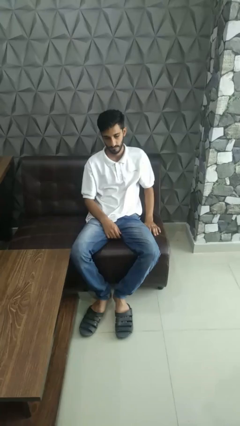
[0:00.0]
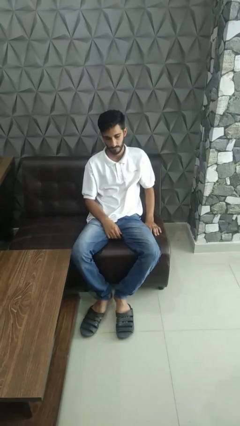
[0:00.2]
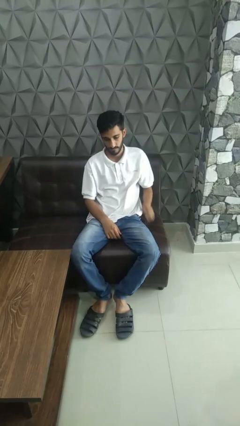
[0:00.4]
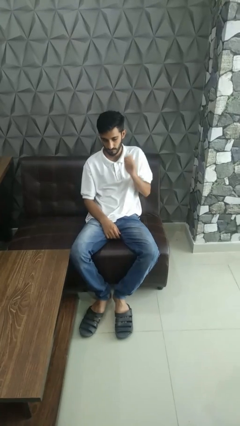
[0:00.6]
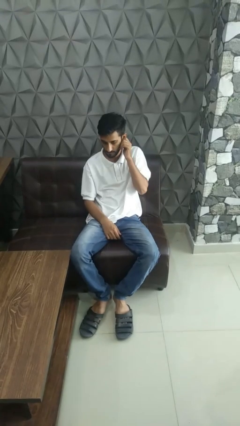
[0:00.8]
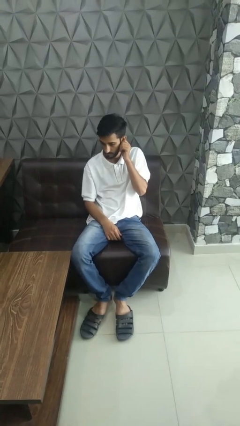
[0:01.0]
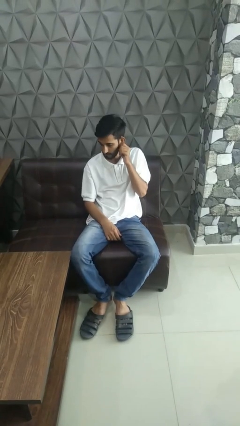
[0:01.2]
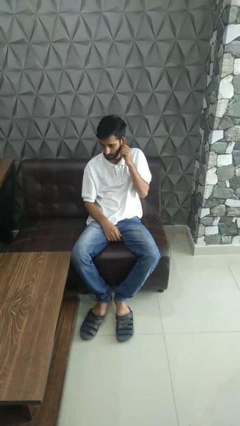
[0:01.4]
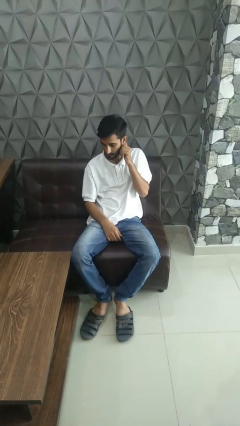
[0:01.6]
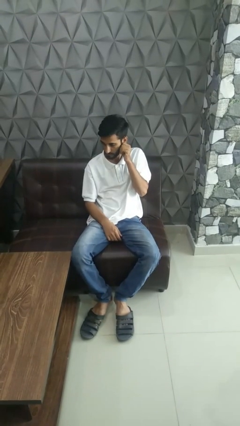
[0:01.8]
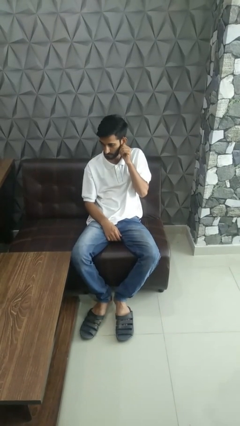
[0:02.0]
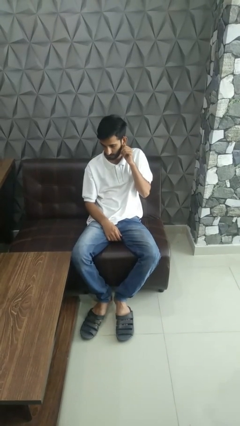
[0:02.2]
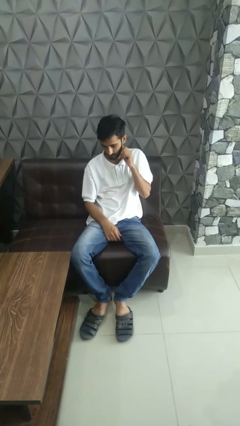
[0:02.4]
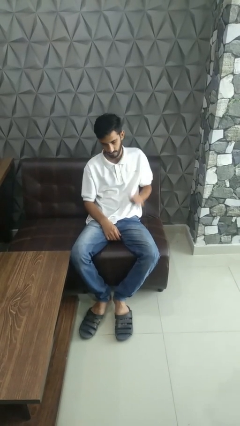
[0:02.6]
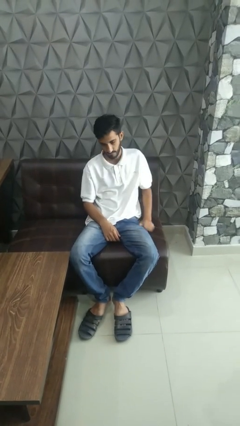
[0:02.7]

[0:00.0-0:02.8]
person touches earlobe

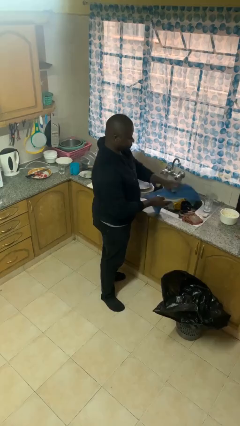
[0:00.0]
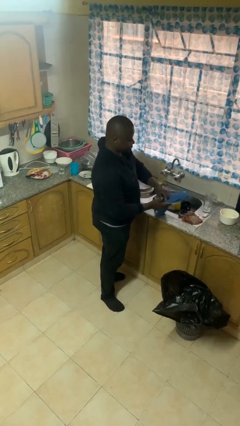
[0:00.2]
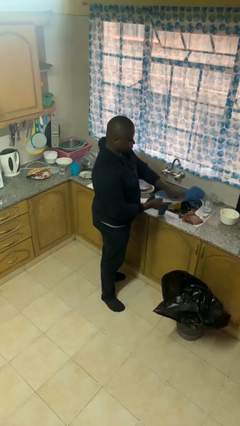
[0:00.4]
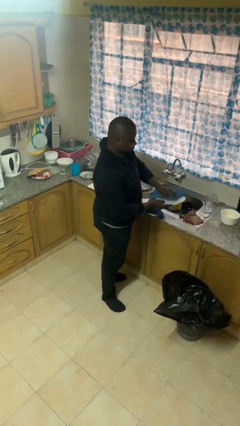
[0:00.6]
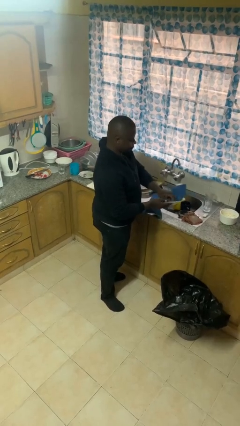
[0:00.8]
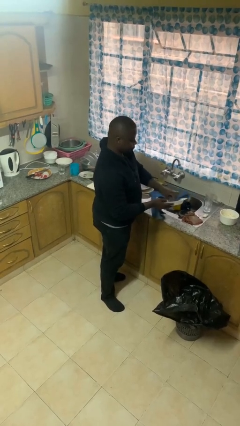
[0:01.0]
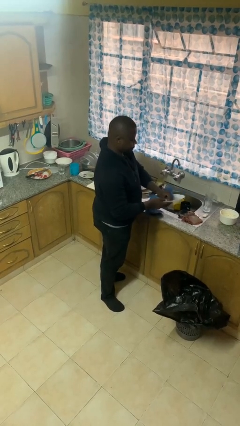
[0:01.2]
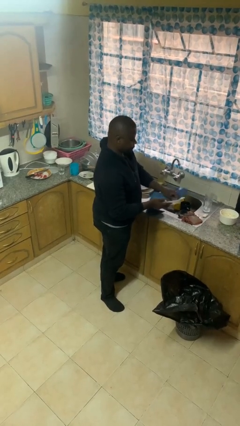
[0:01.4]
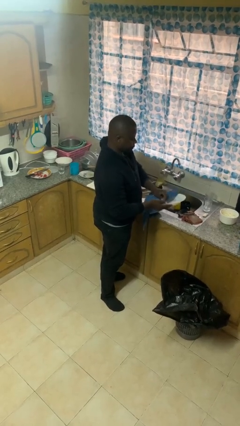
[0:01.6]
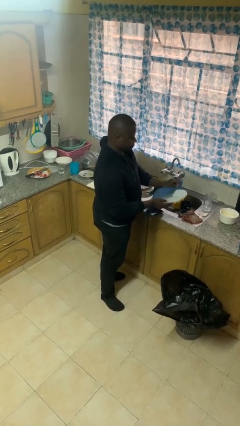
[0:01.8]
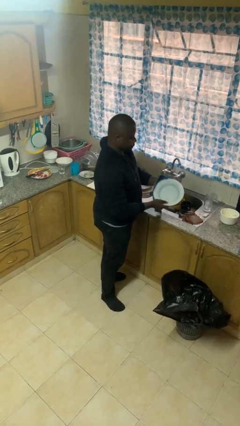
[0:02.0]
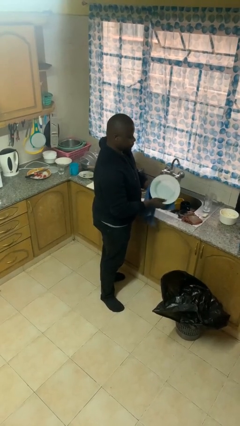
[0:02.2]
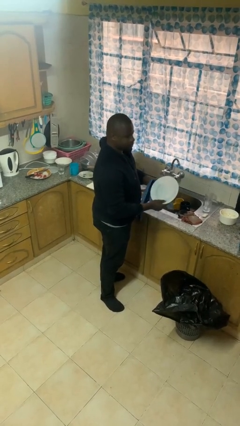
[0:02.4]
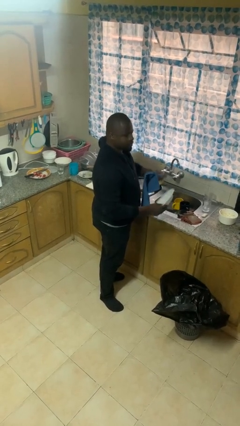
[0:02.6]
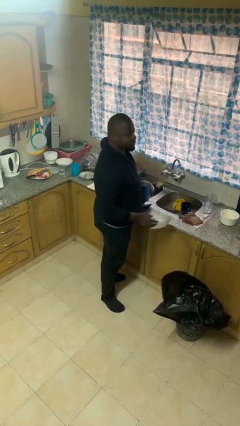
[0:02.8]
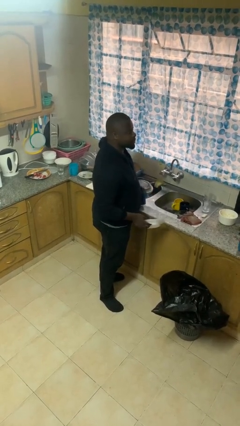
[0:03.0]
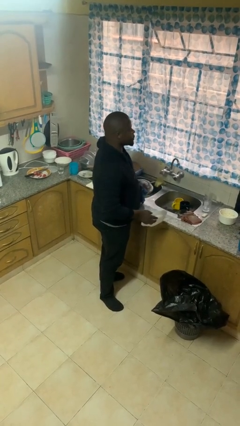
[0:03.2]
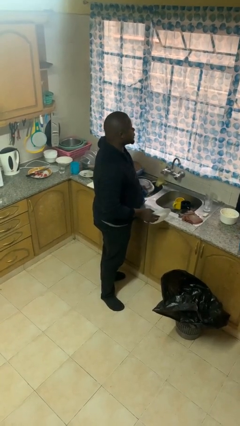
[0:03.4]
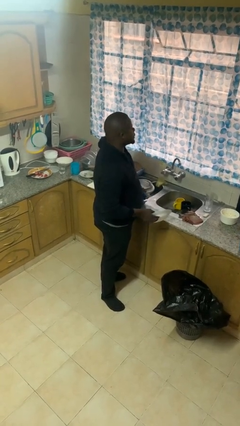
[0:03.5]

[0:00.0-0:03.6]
person dries dish

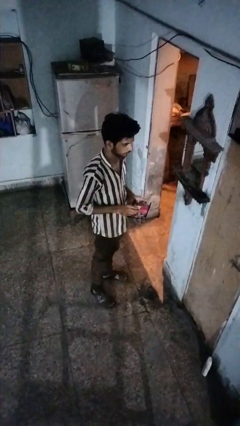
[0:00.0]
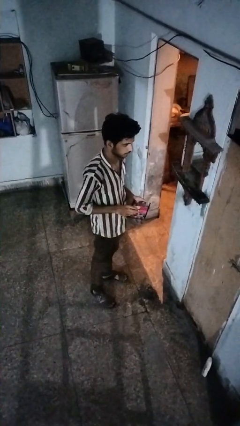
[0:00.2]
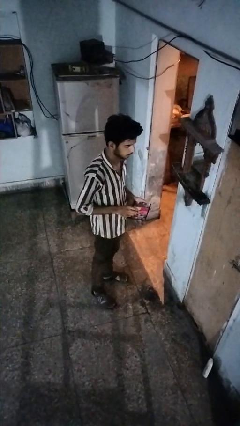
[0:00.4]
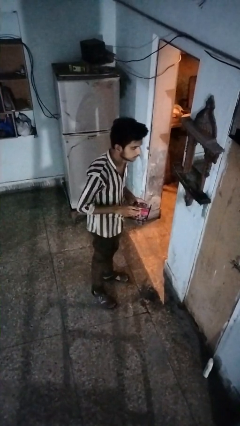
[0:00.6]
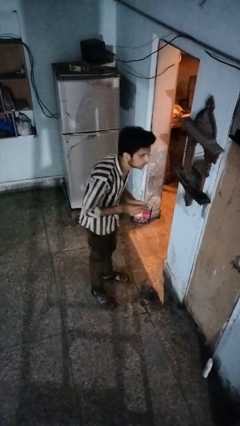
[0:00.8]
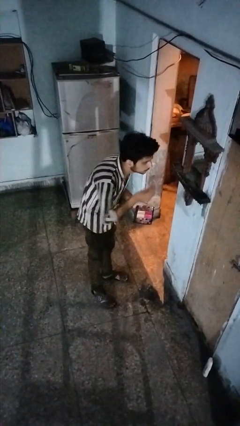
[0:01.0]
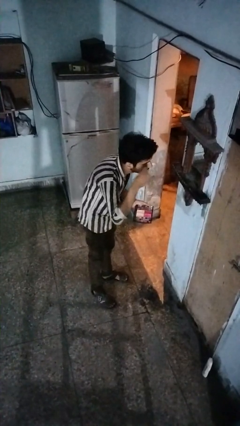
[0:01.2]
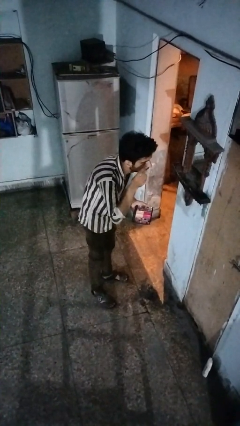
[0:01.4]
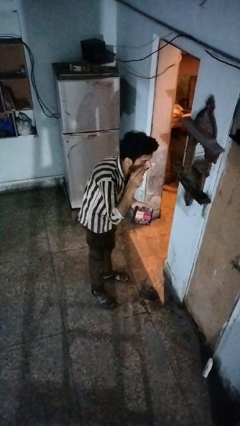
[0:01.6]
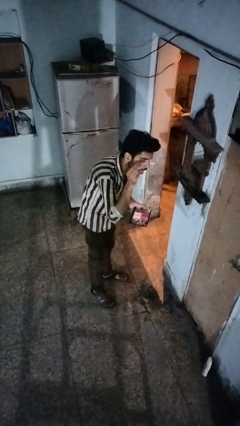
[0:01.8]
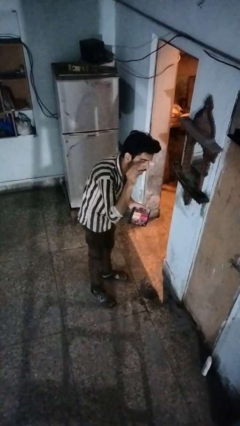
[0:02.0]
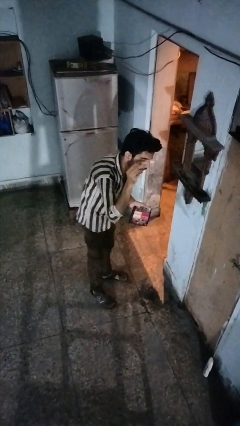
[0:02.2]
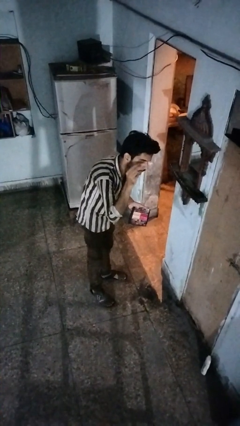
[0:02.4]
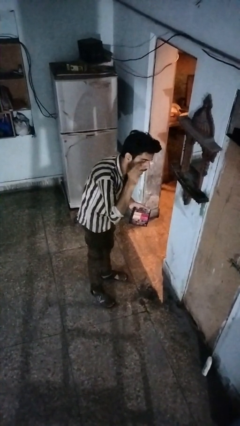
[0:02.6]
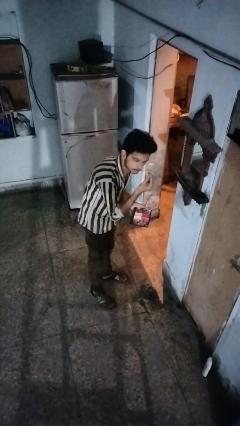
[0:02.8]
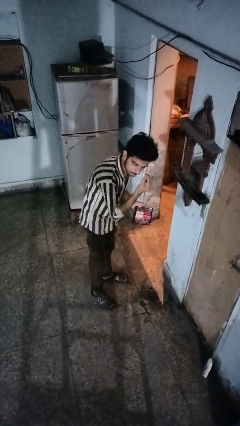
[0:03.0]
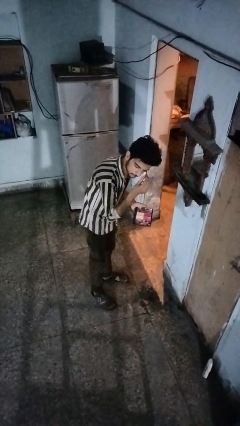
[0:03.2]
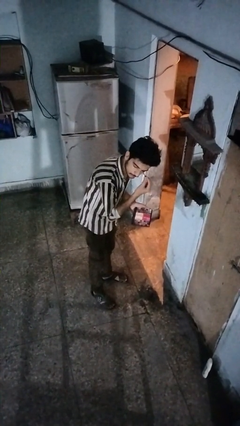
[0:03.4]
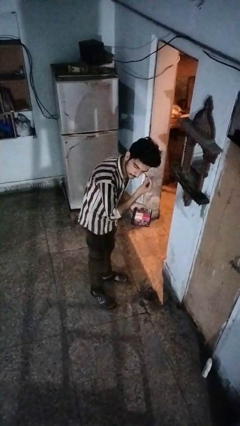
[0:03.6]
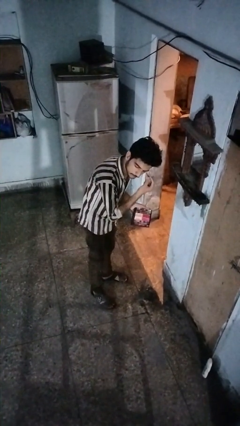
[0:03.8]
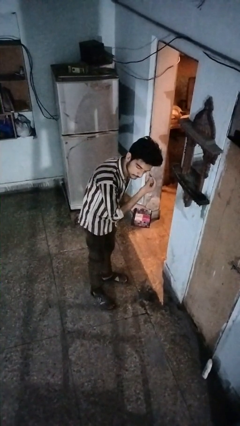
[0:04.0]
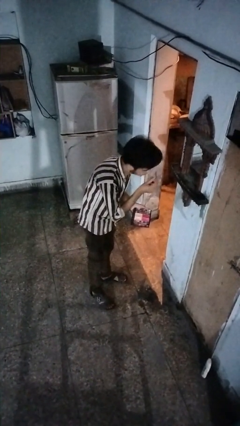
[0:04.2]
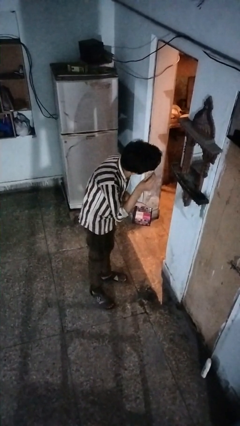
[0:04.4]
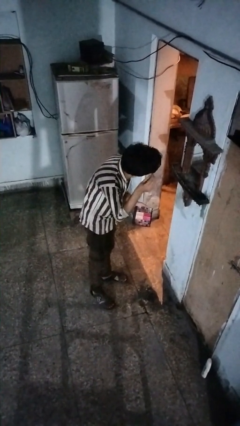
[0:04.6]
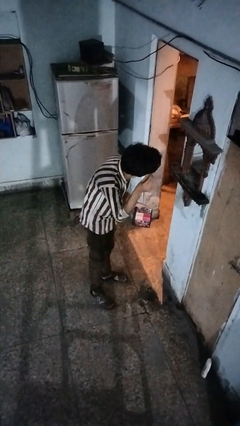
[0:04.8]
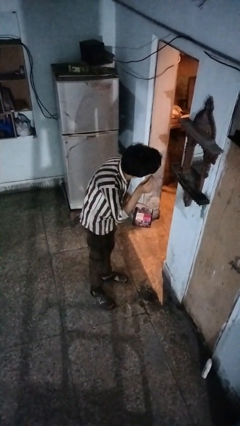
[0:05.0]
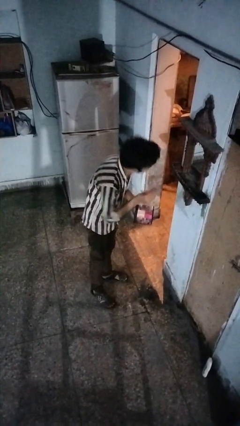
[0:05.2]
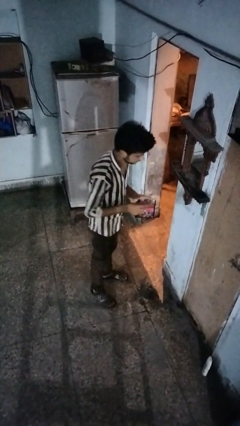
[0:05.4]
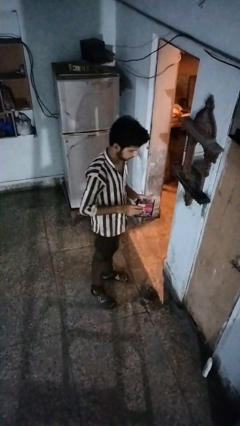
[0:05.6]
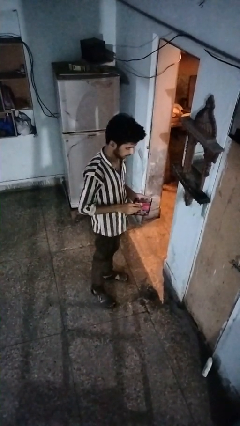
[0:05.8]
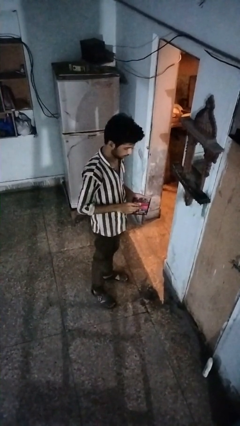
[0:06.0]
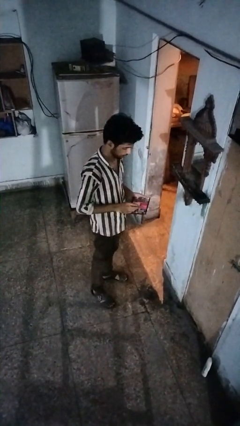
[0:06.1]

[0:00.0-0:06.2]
person applies eye makeup

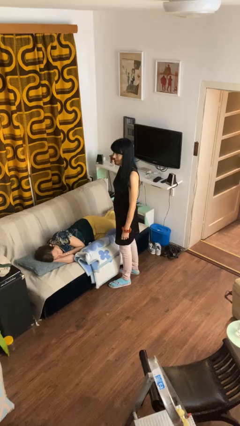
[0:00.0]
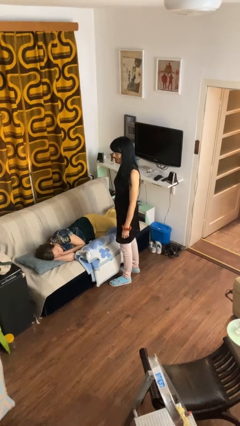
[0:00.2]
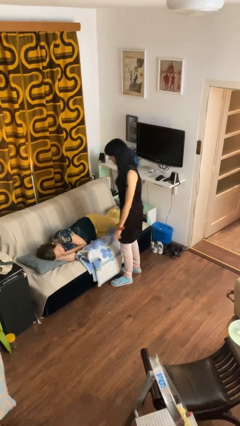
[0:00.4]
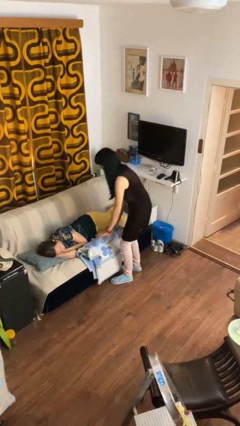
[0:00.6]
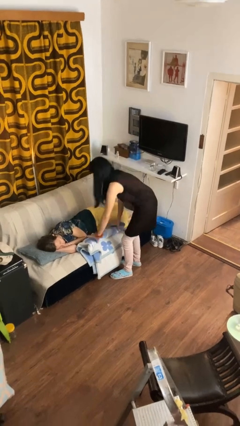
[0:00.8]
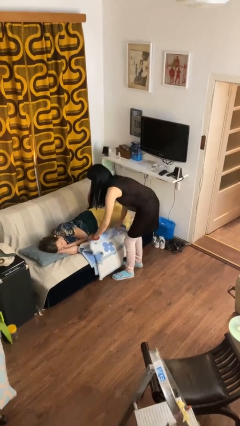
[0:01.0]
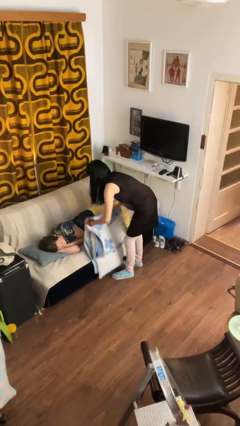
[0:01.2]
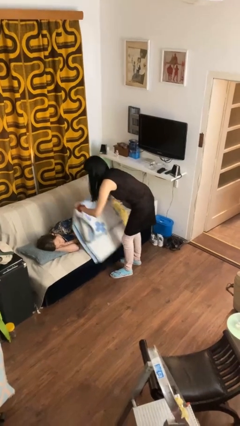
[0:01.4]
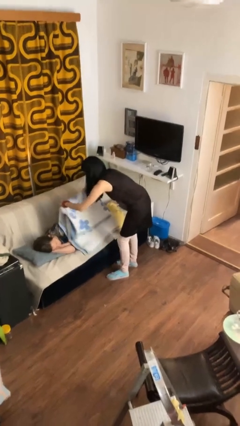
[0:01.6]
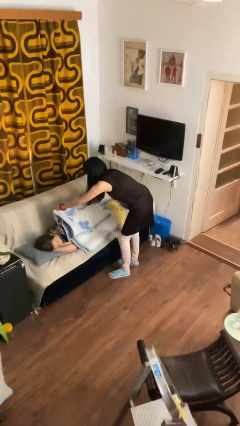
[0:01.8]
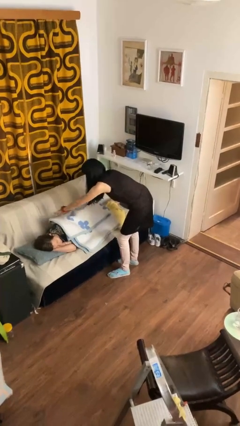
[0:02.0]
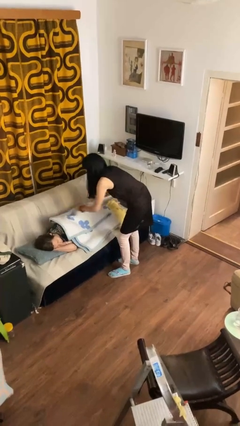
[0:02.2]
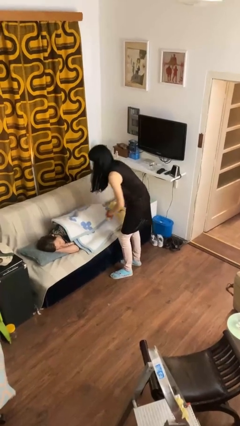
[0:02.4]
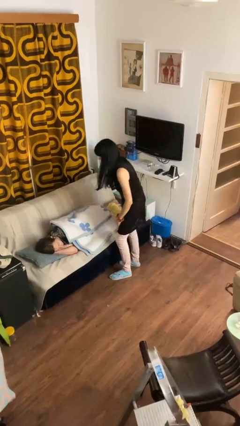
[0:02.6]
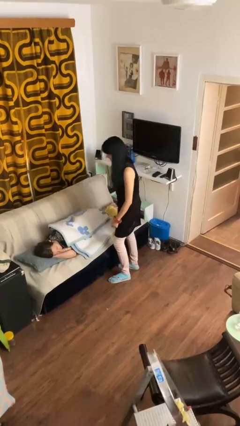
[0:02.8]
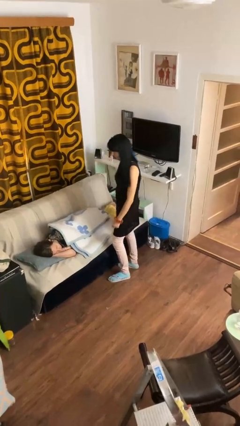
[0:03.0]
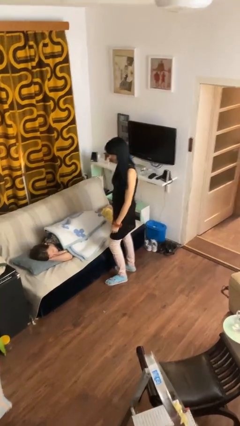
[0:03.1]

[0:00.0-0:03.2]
person covers friend with blanket

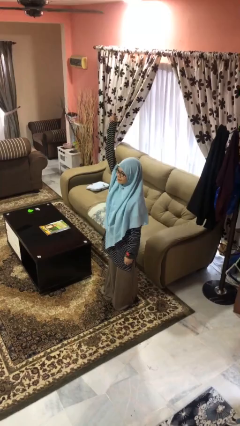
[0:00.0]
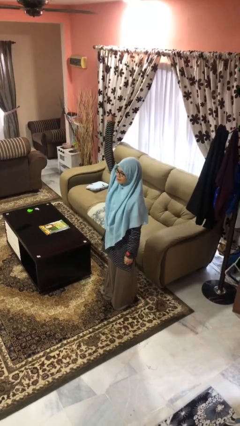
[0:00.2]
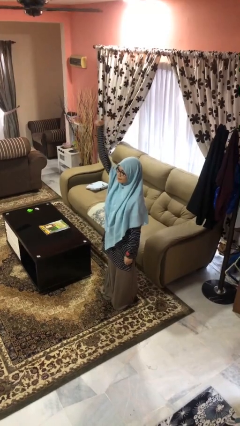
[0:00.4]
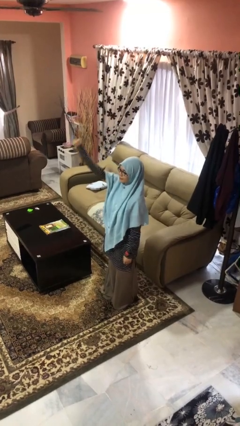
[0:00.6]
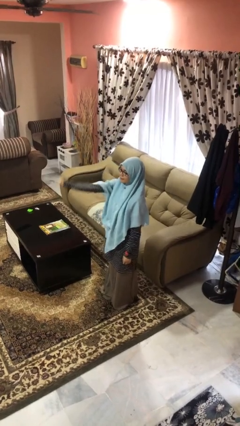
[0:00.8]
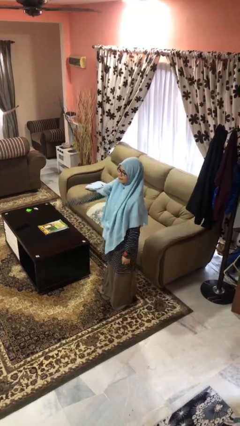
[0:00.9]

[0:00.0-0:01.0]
person gestures lower hand

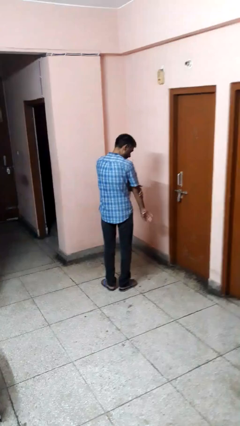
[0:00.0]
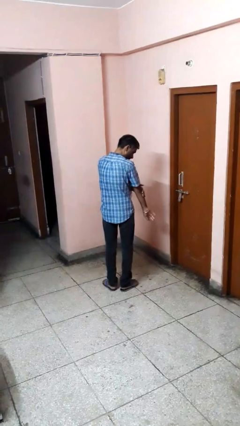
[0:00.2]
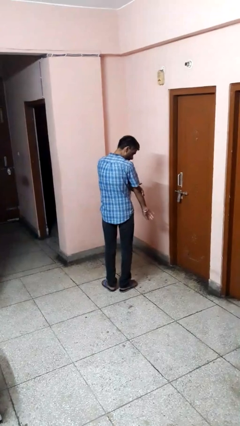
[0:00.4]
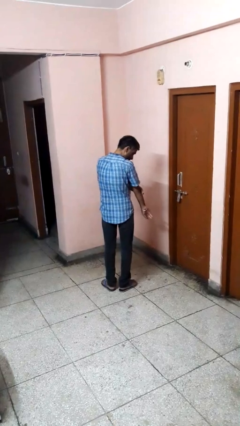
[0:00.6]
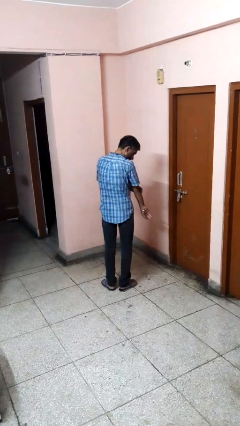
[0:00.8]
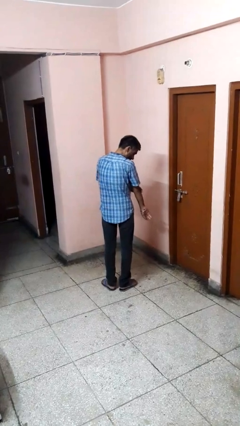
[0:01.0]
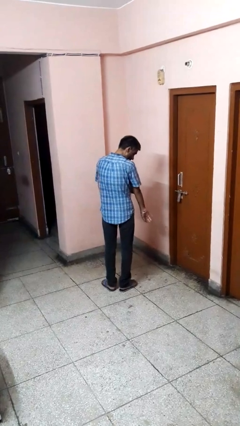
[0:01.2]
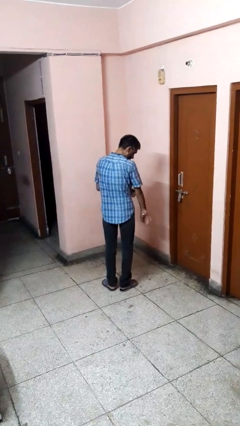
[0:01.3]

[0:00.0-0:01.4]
person swats bug
